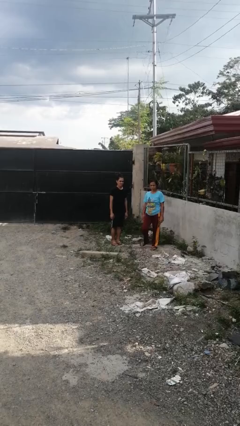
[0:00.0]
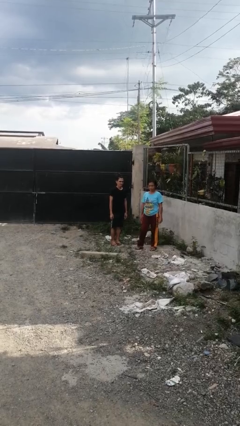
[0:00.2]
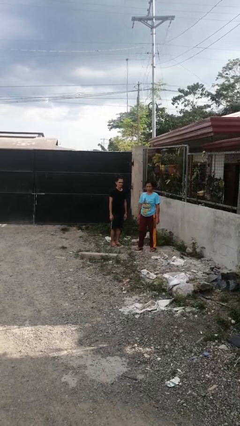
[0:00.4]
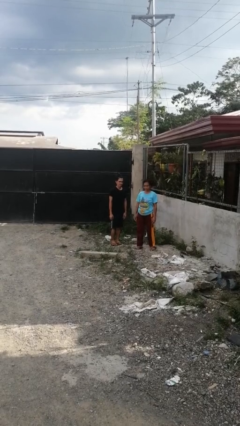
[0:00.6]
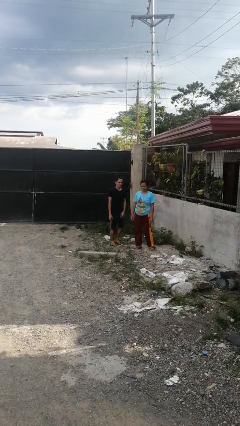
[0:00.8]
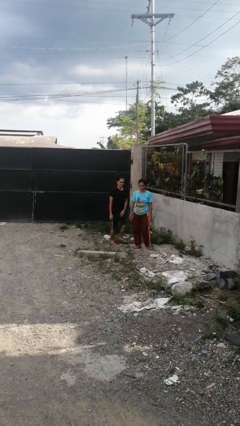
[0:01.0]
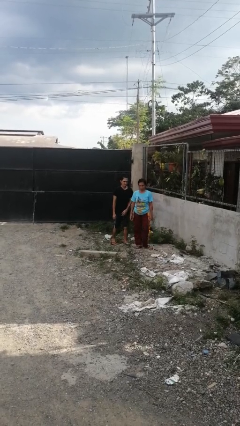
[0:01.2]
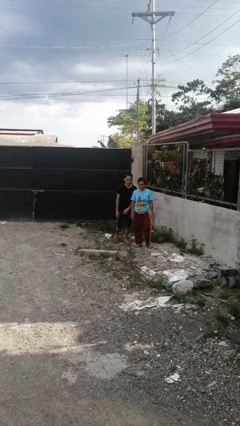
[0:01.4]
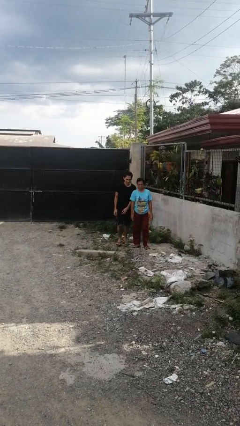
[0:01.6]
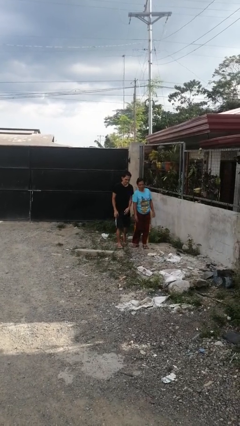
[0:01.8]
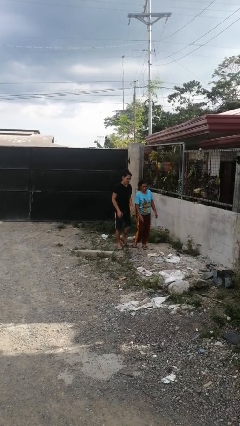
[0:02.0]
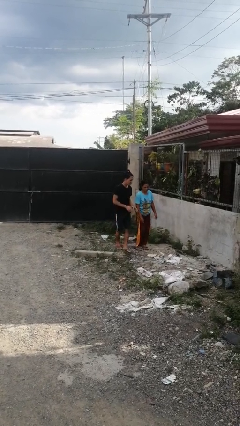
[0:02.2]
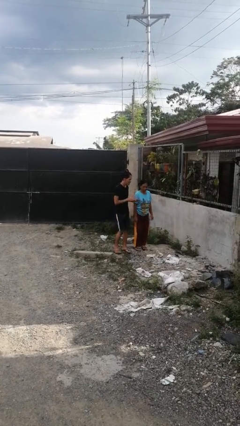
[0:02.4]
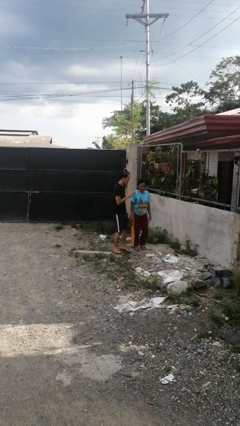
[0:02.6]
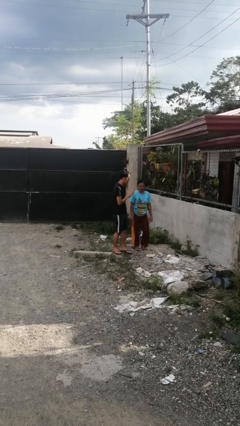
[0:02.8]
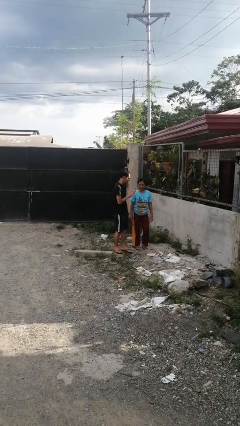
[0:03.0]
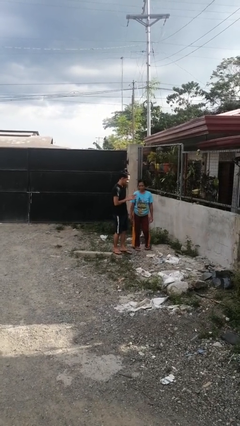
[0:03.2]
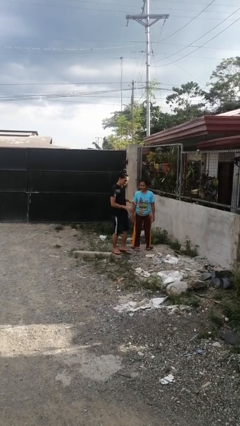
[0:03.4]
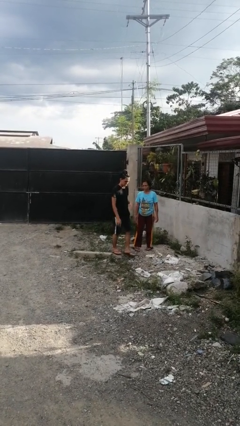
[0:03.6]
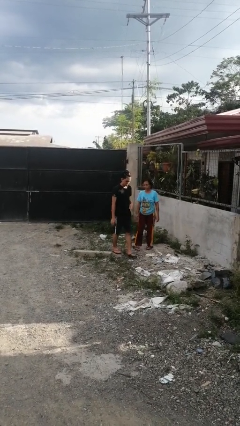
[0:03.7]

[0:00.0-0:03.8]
person bumps into person

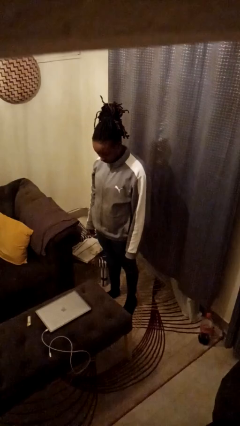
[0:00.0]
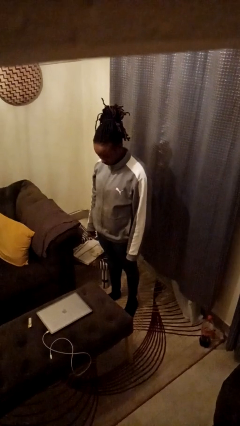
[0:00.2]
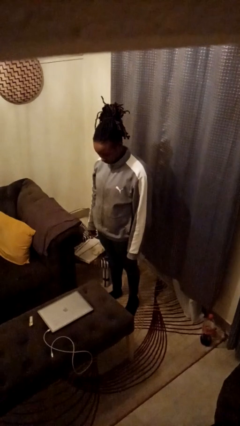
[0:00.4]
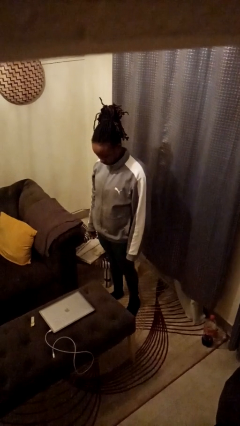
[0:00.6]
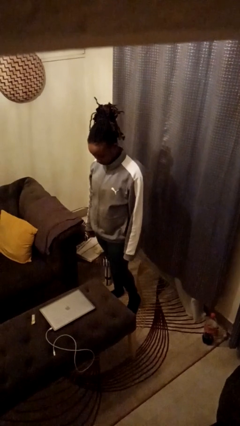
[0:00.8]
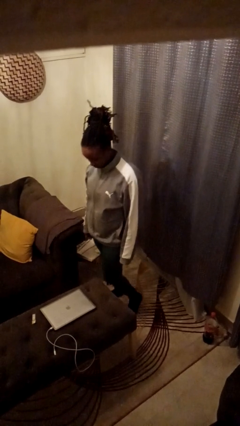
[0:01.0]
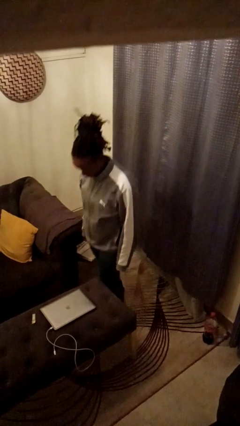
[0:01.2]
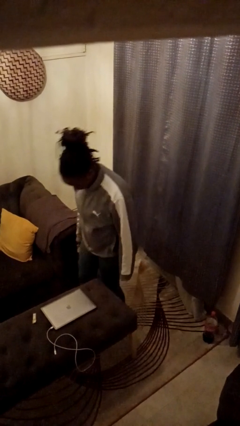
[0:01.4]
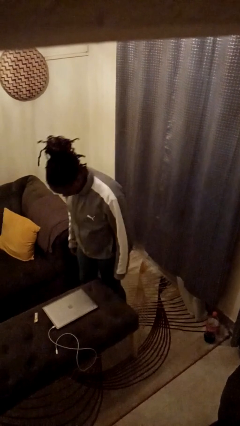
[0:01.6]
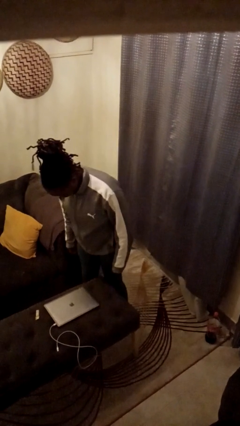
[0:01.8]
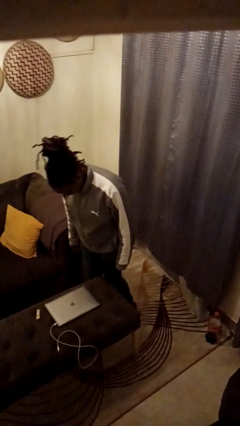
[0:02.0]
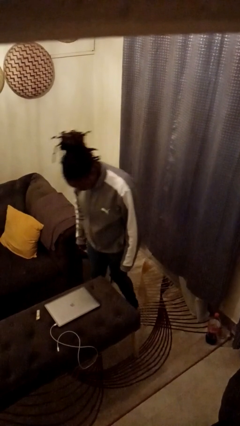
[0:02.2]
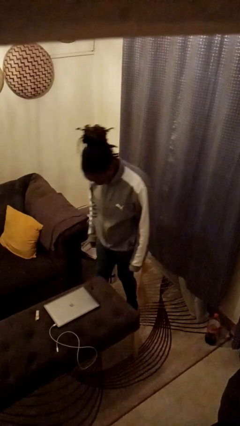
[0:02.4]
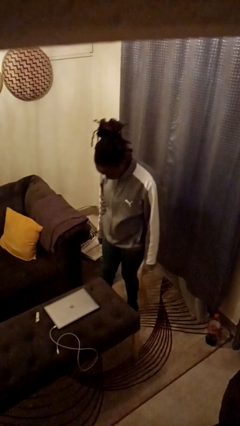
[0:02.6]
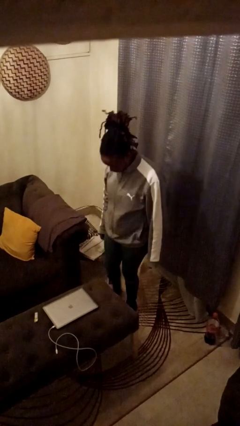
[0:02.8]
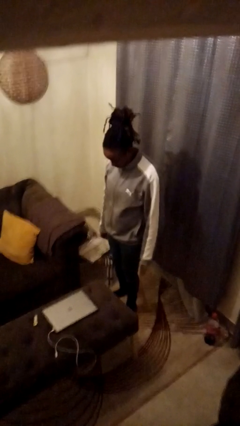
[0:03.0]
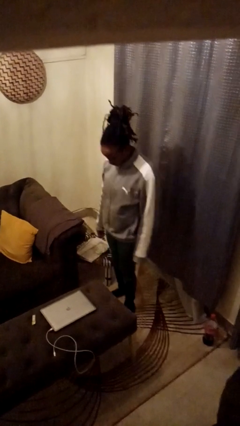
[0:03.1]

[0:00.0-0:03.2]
person bumps into table

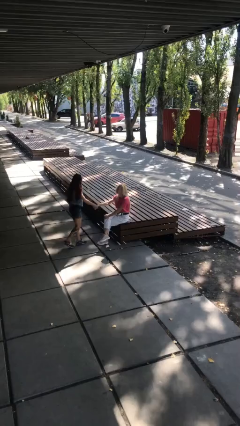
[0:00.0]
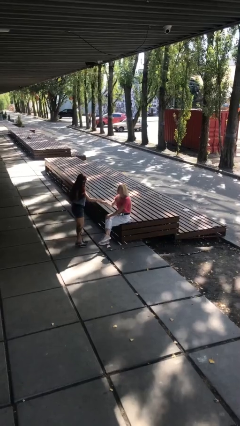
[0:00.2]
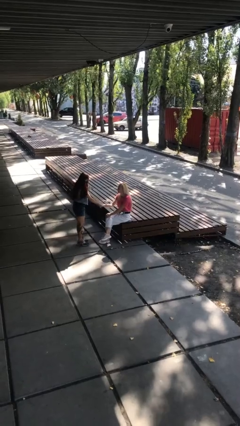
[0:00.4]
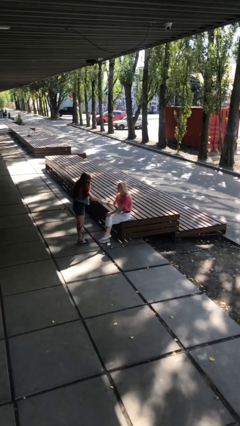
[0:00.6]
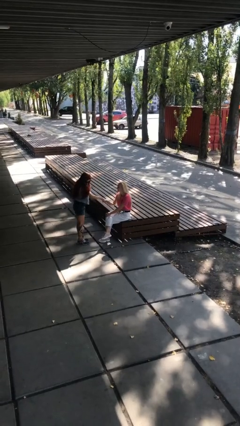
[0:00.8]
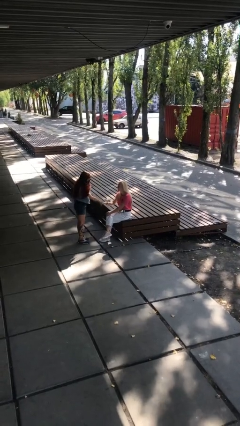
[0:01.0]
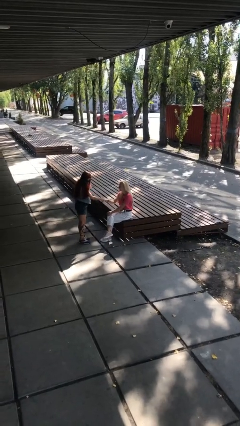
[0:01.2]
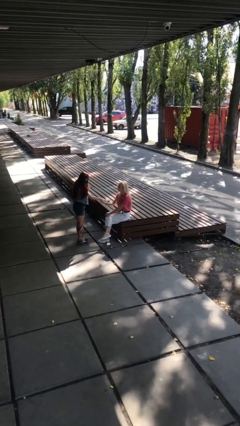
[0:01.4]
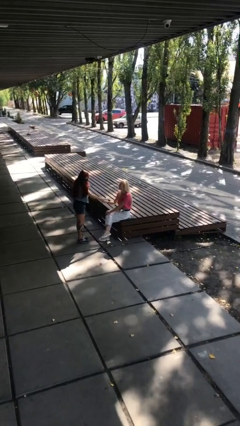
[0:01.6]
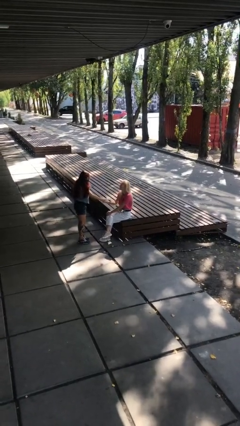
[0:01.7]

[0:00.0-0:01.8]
person shakes hand

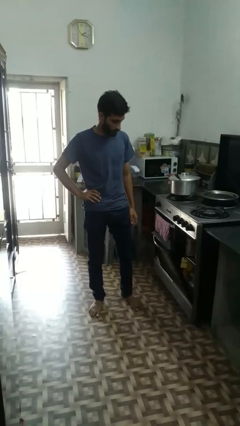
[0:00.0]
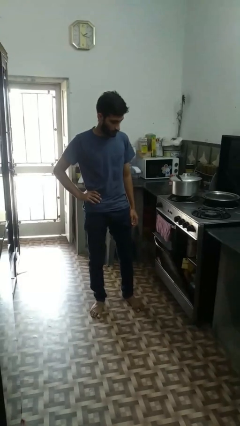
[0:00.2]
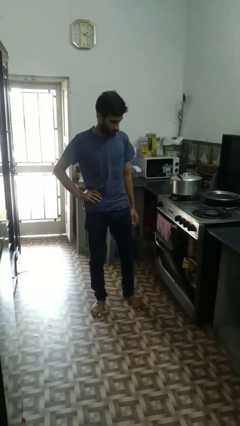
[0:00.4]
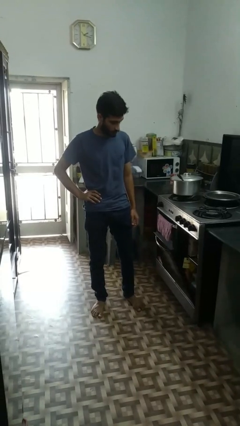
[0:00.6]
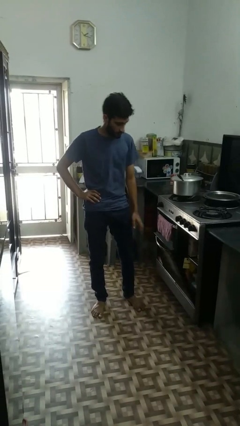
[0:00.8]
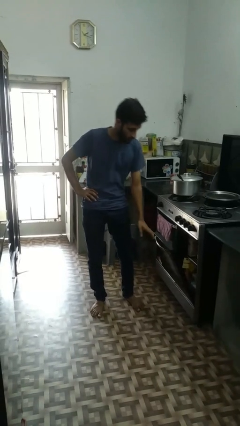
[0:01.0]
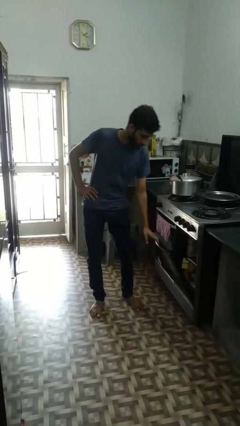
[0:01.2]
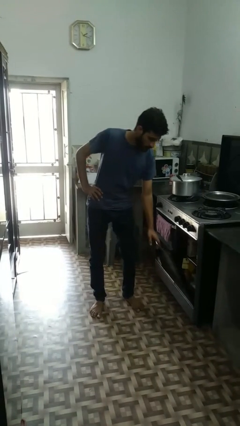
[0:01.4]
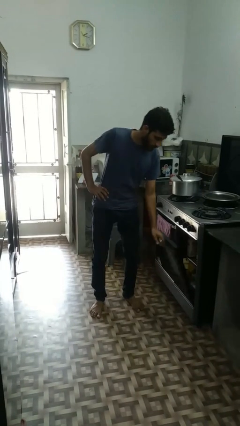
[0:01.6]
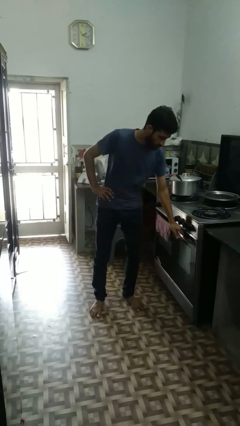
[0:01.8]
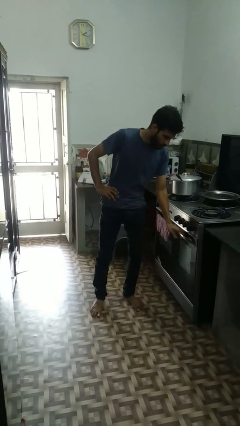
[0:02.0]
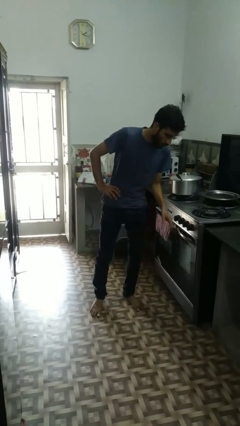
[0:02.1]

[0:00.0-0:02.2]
person closes dishwasher

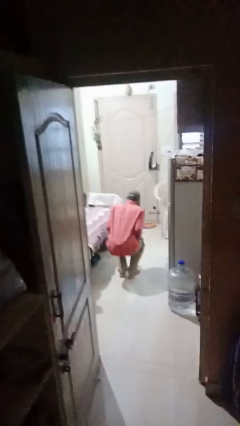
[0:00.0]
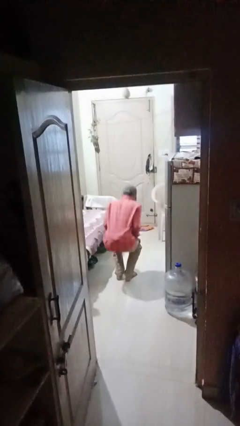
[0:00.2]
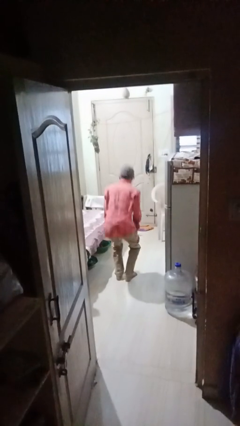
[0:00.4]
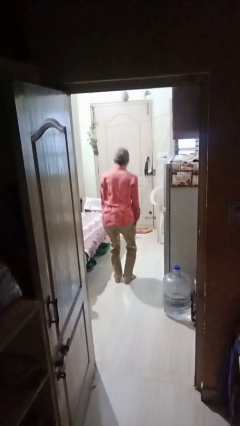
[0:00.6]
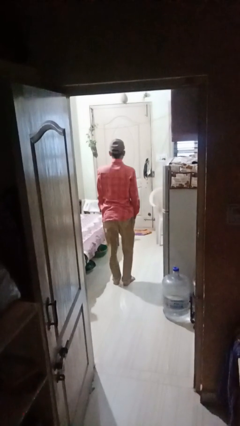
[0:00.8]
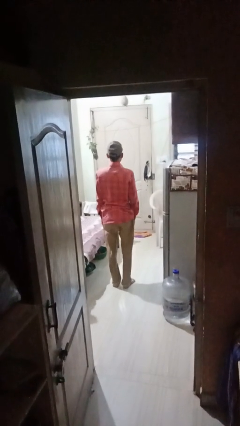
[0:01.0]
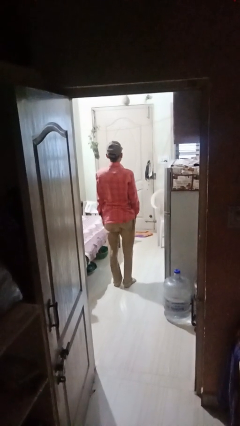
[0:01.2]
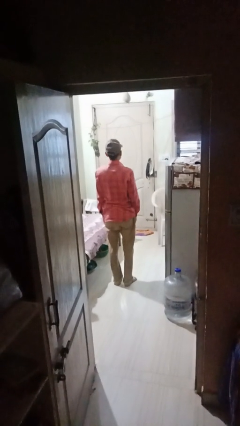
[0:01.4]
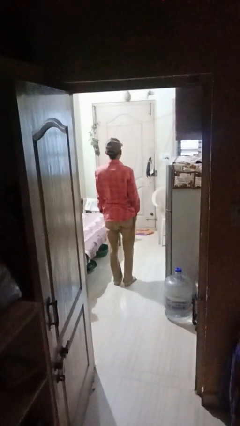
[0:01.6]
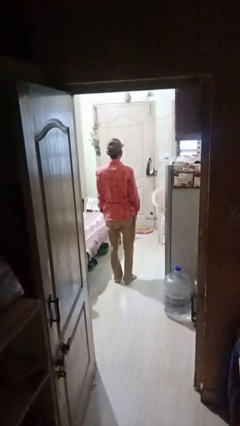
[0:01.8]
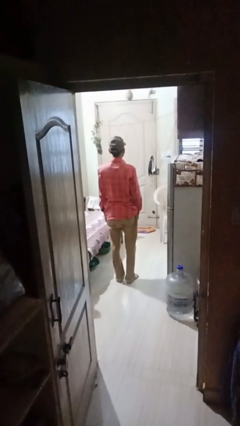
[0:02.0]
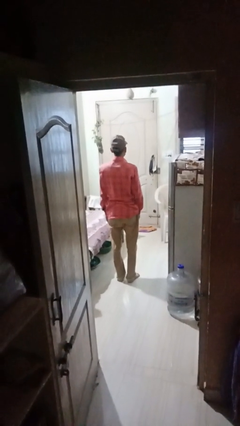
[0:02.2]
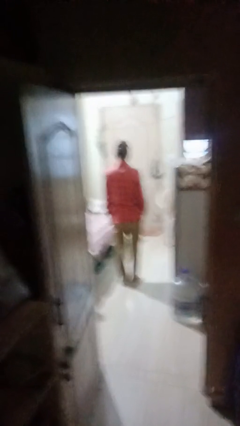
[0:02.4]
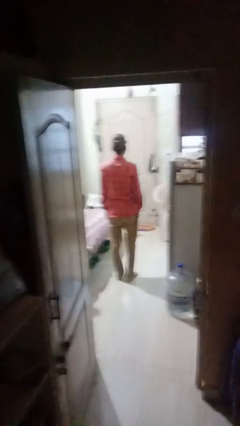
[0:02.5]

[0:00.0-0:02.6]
person stands up

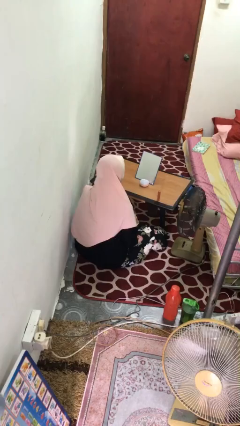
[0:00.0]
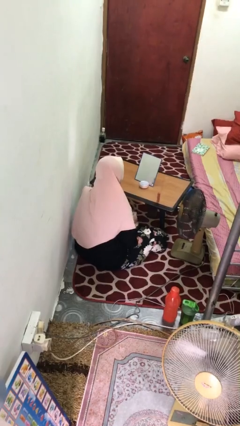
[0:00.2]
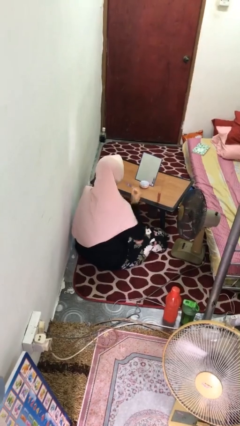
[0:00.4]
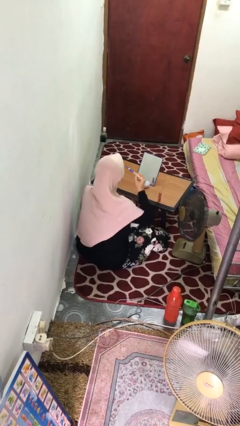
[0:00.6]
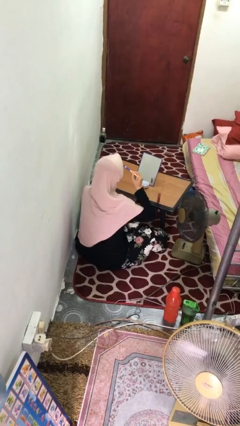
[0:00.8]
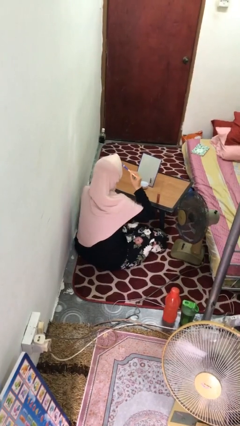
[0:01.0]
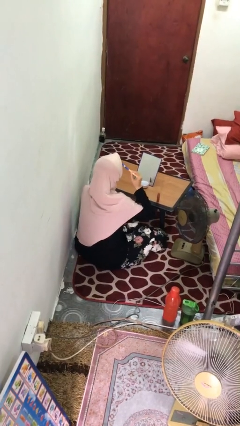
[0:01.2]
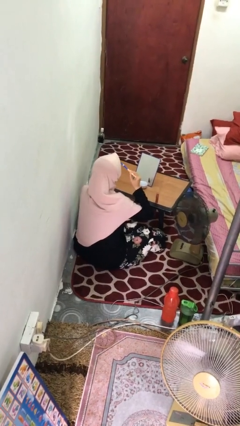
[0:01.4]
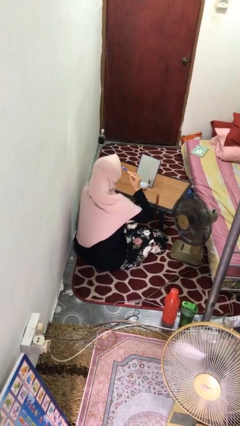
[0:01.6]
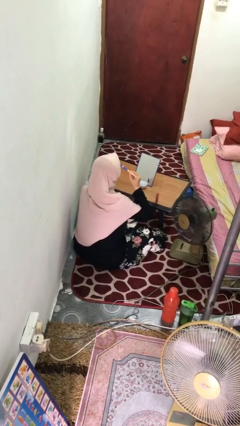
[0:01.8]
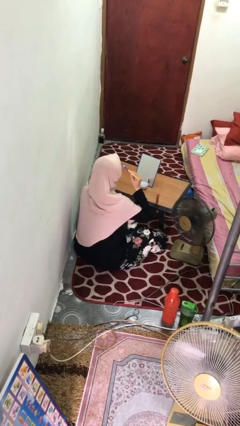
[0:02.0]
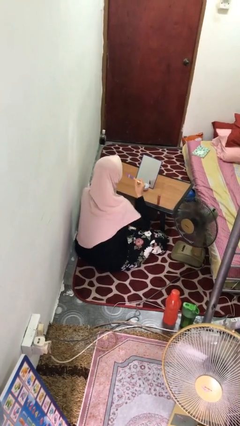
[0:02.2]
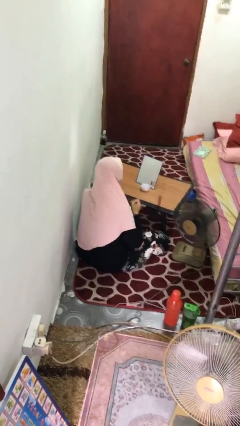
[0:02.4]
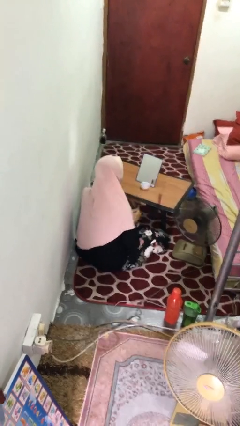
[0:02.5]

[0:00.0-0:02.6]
person applies eye makeup

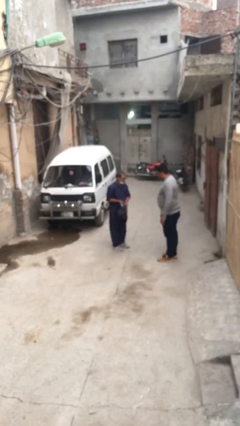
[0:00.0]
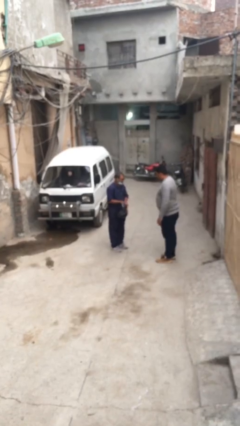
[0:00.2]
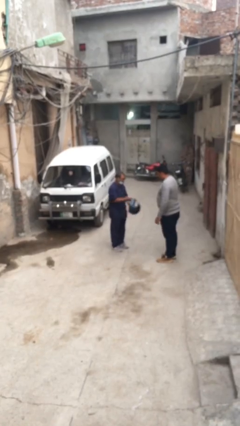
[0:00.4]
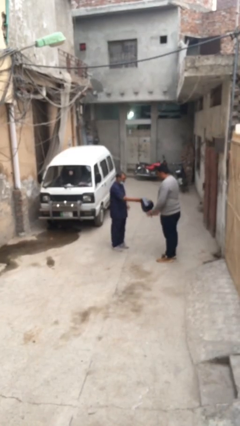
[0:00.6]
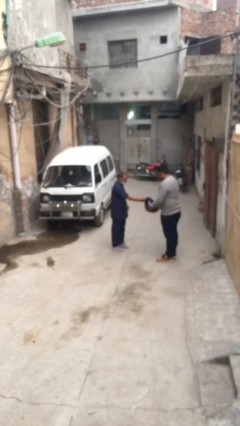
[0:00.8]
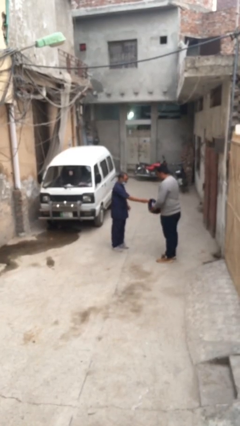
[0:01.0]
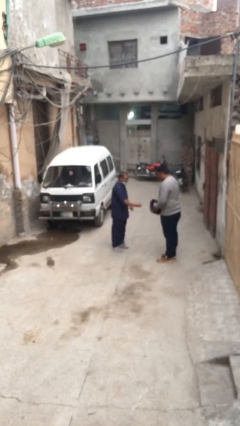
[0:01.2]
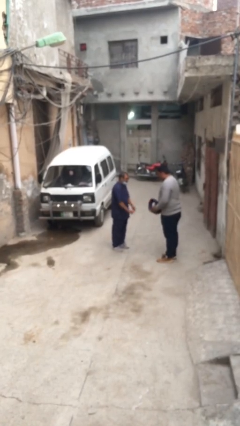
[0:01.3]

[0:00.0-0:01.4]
person transfers object to person
